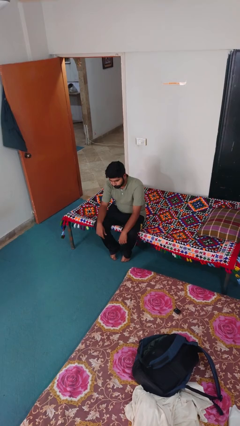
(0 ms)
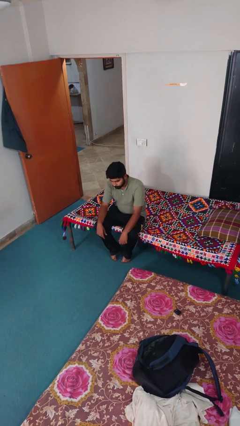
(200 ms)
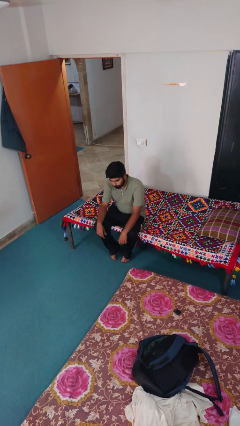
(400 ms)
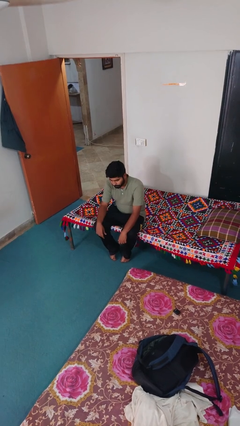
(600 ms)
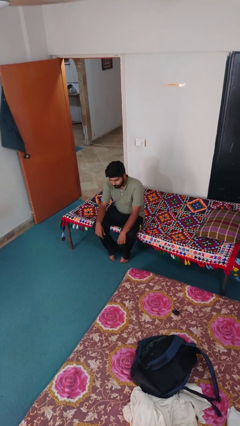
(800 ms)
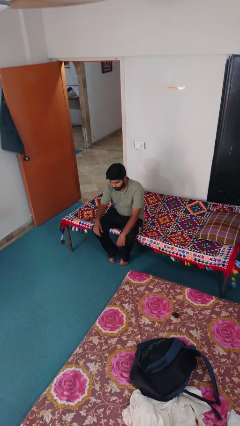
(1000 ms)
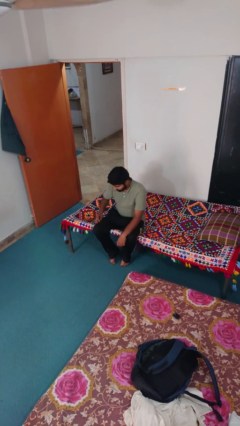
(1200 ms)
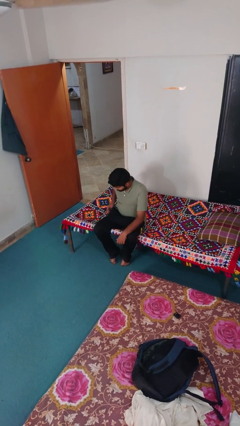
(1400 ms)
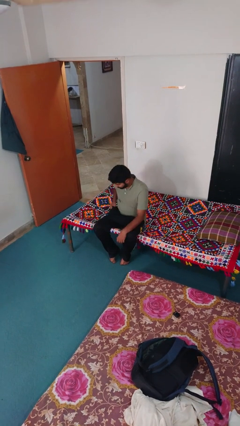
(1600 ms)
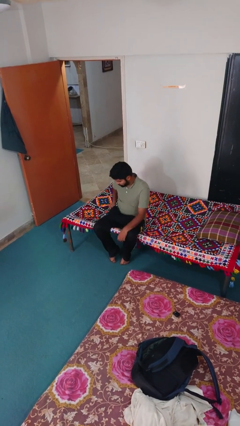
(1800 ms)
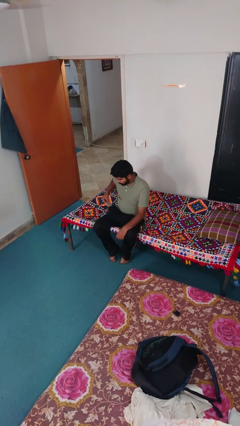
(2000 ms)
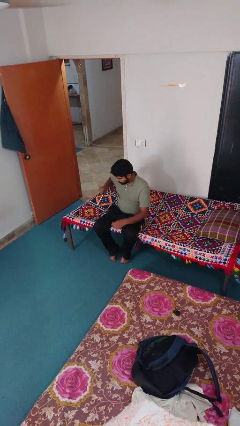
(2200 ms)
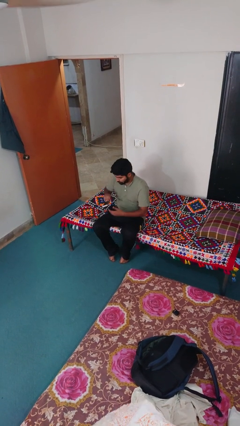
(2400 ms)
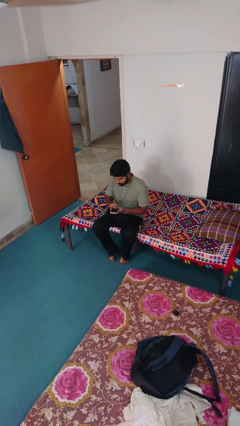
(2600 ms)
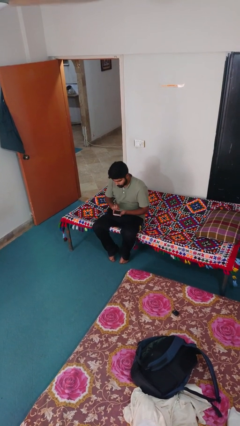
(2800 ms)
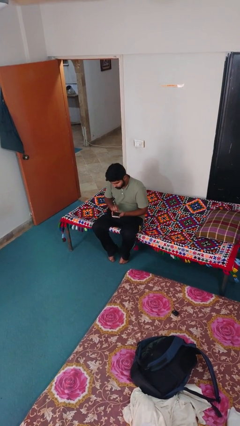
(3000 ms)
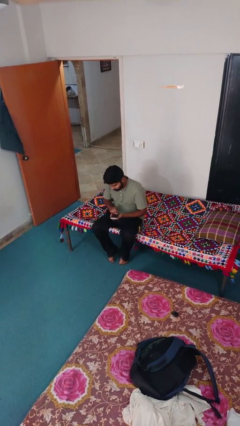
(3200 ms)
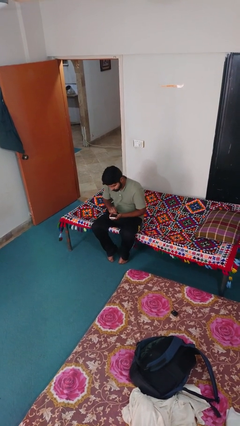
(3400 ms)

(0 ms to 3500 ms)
person takes phone from pocket

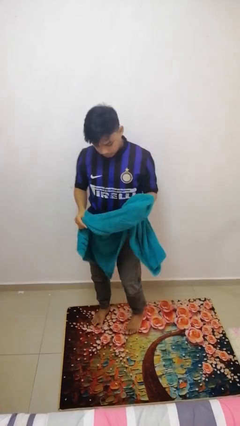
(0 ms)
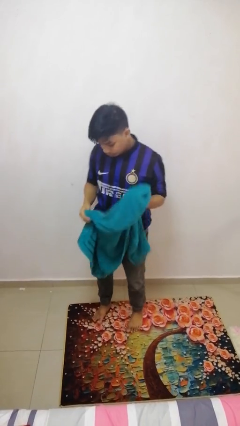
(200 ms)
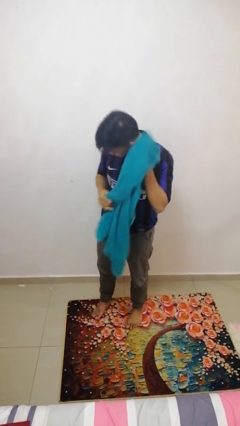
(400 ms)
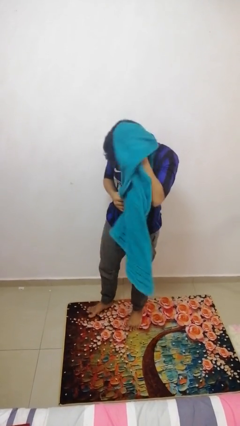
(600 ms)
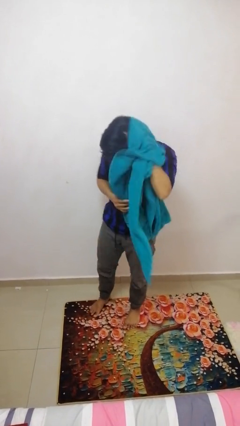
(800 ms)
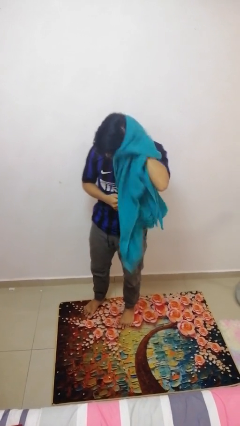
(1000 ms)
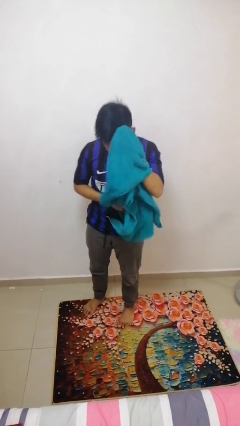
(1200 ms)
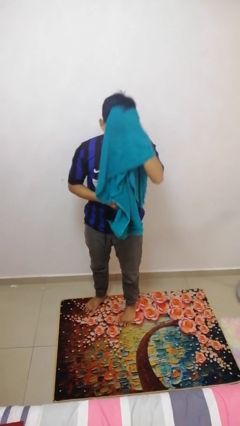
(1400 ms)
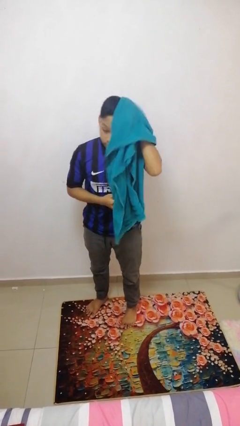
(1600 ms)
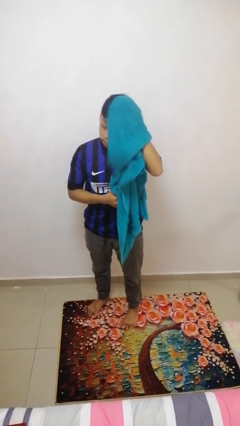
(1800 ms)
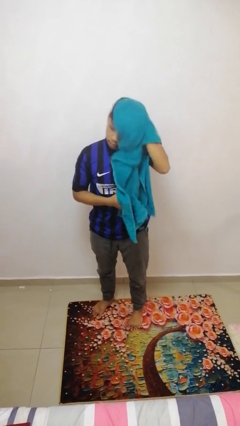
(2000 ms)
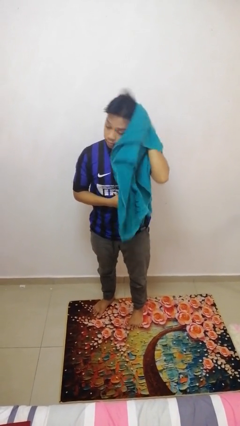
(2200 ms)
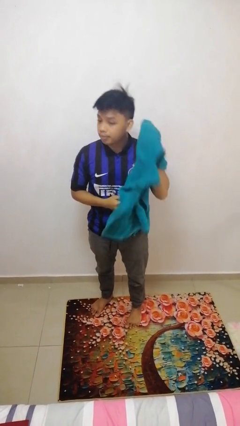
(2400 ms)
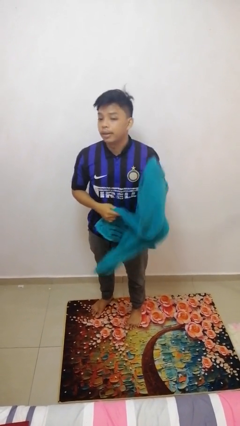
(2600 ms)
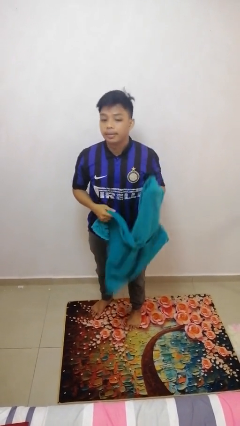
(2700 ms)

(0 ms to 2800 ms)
person dries hair with towel

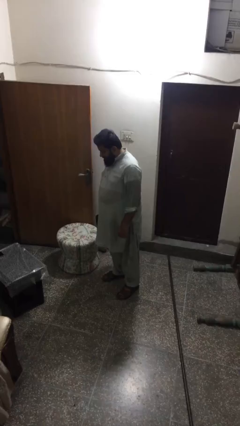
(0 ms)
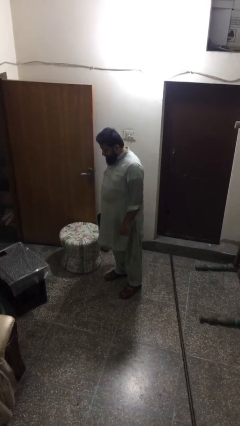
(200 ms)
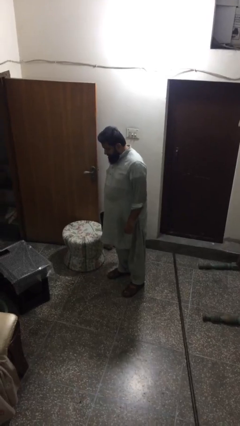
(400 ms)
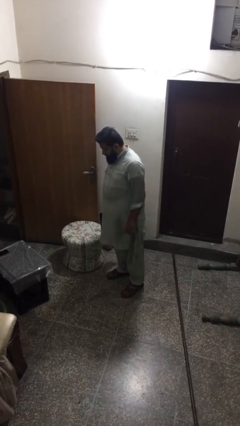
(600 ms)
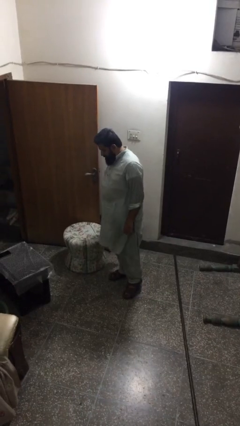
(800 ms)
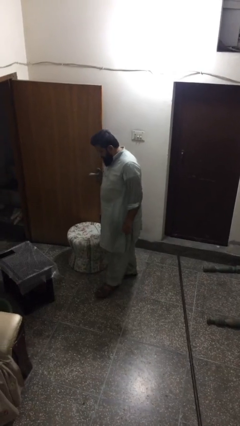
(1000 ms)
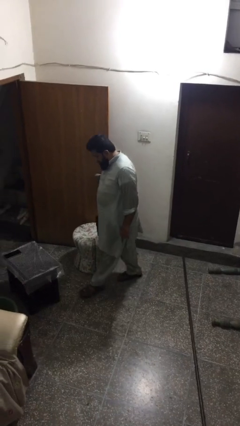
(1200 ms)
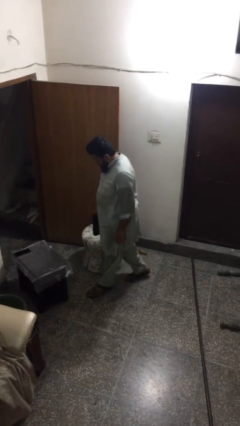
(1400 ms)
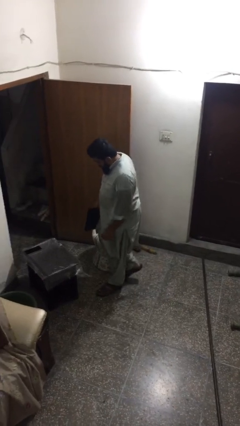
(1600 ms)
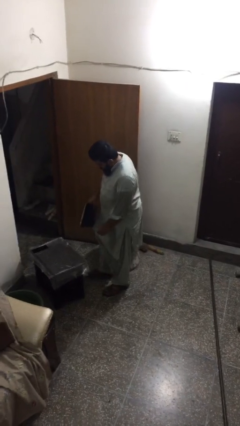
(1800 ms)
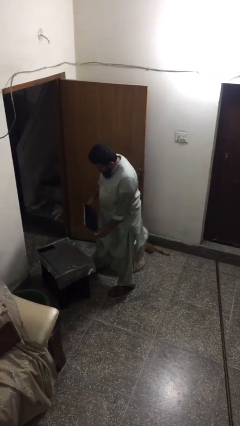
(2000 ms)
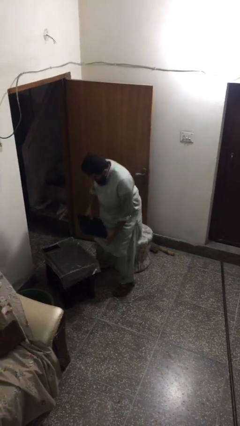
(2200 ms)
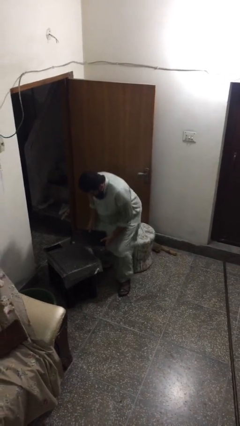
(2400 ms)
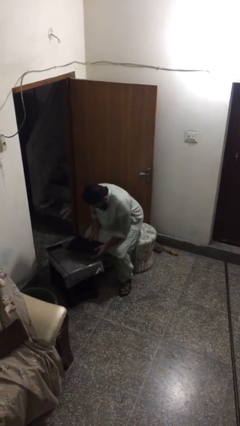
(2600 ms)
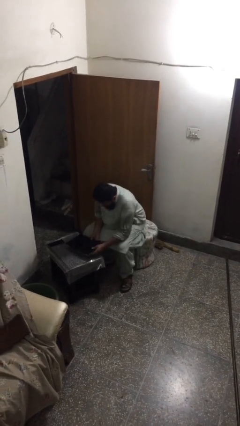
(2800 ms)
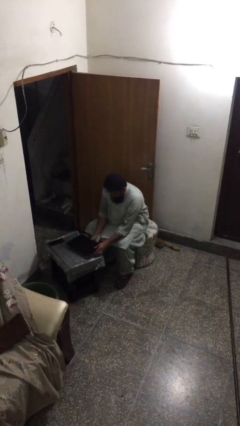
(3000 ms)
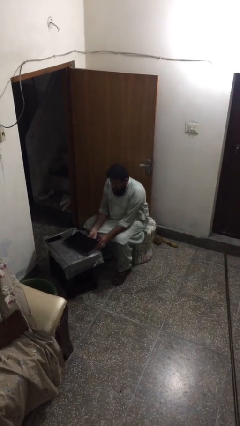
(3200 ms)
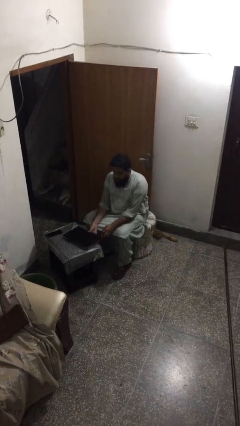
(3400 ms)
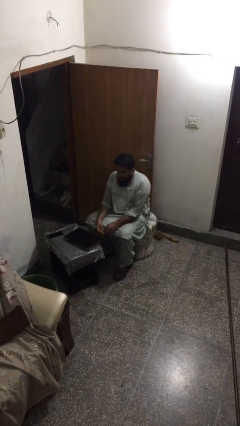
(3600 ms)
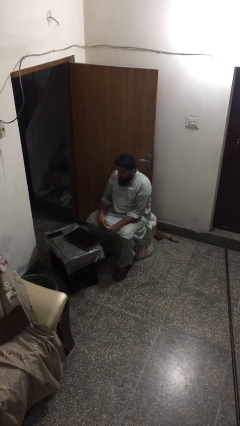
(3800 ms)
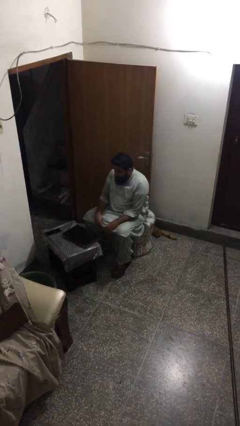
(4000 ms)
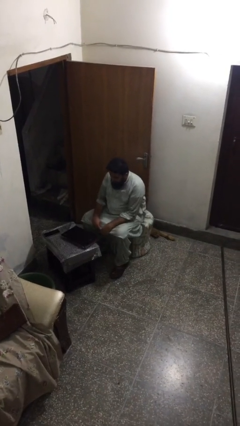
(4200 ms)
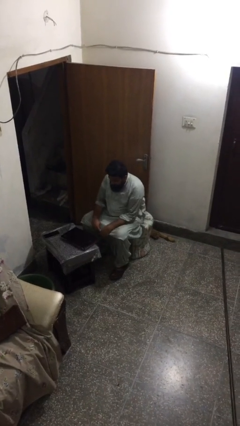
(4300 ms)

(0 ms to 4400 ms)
person sits down

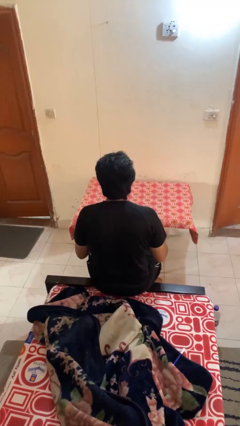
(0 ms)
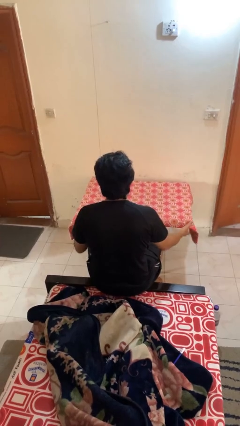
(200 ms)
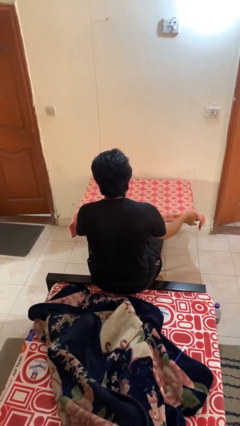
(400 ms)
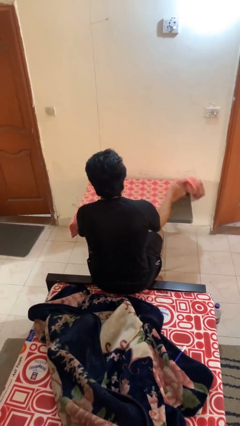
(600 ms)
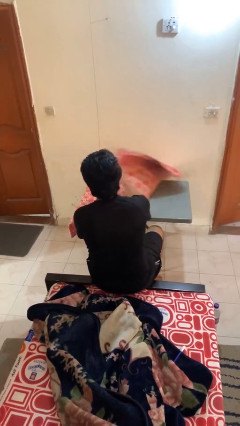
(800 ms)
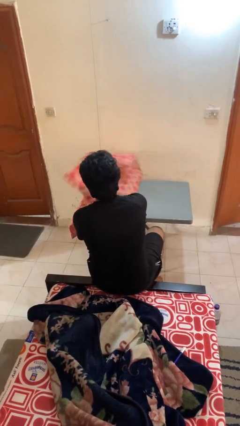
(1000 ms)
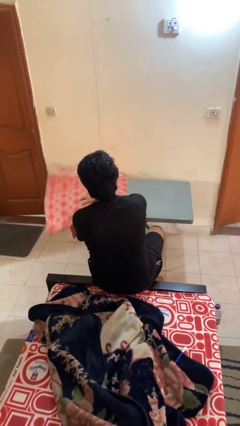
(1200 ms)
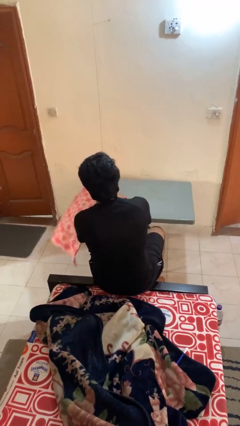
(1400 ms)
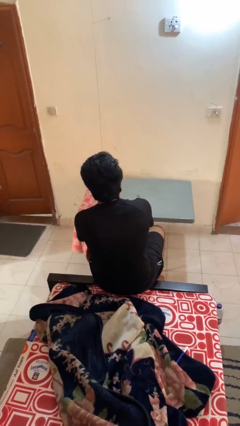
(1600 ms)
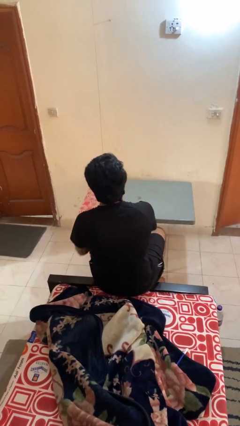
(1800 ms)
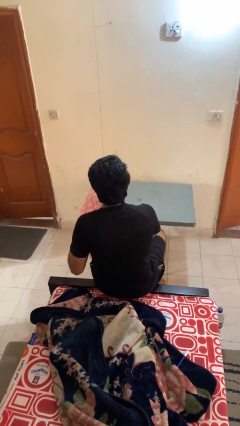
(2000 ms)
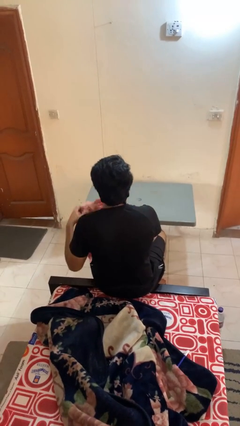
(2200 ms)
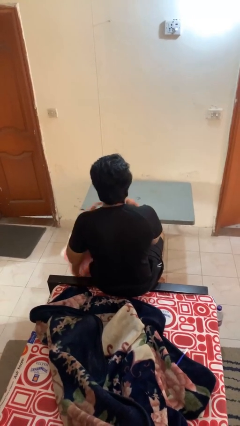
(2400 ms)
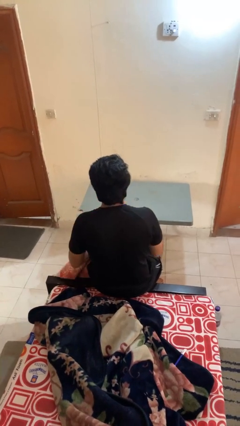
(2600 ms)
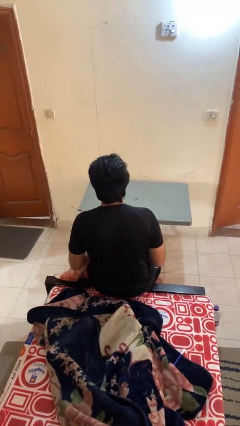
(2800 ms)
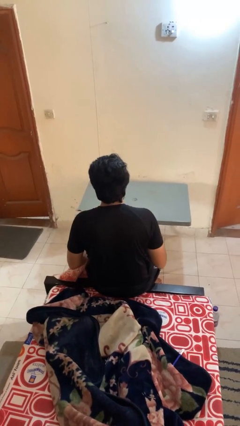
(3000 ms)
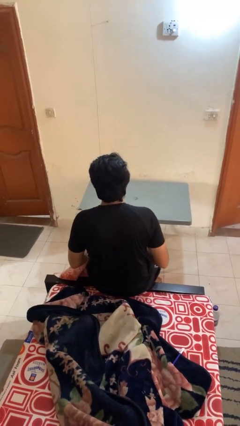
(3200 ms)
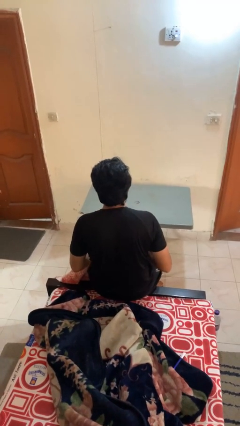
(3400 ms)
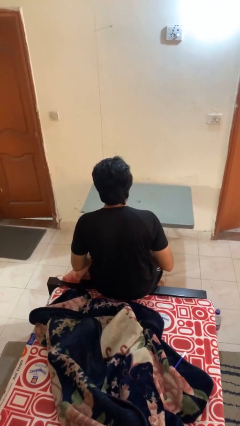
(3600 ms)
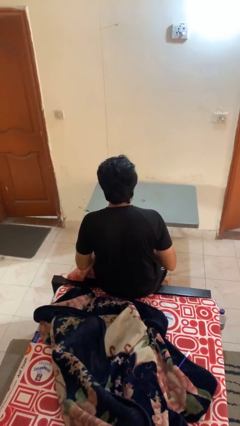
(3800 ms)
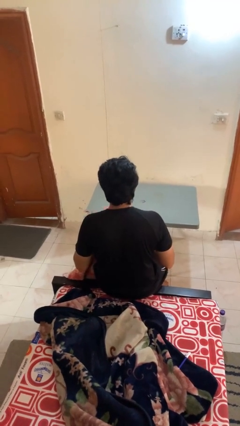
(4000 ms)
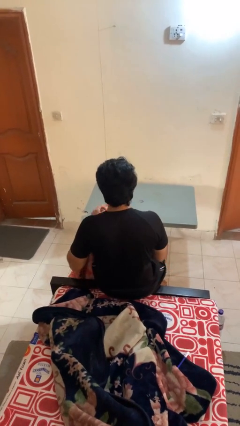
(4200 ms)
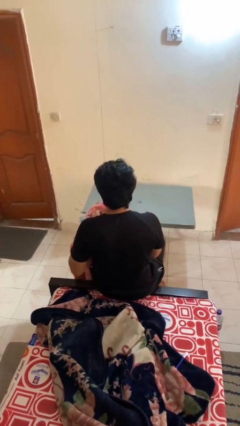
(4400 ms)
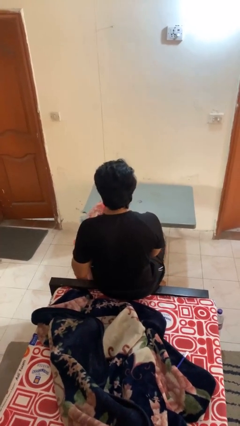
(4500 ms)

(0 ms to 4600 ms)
person folds tablecloth

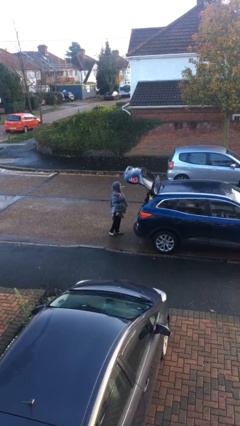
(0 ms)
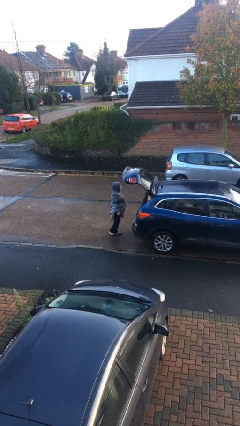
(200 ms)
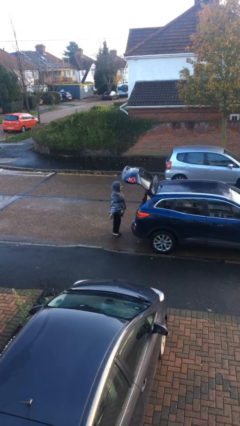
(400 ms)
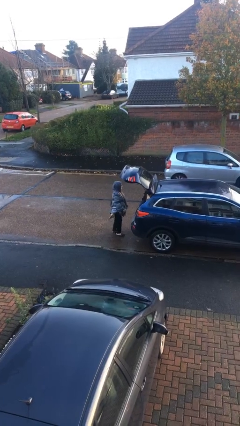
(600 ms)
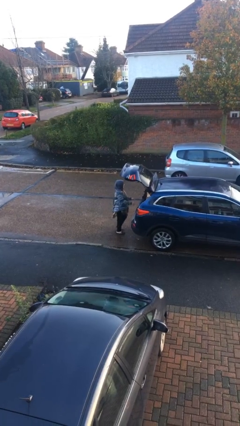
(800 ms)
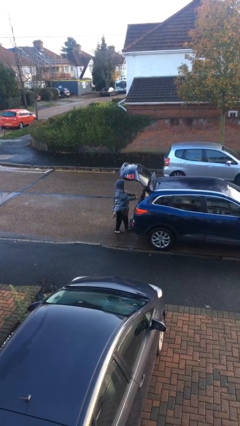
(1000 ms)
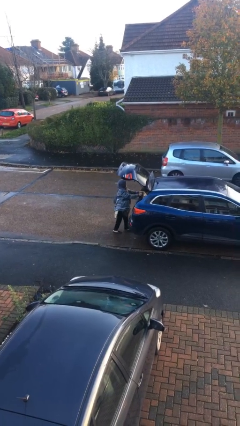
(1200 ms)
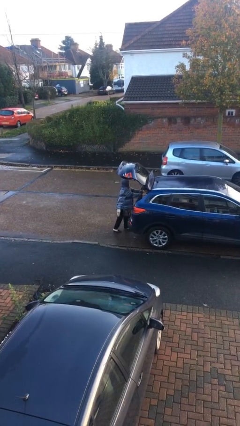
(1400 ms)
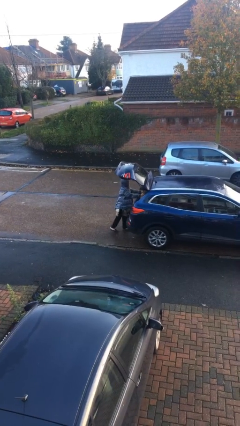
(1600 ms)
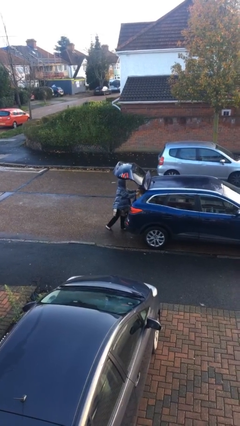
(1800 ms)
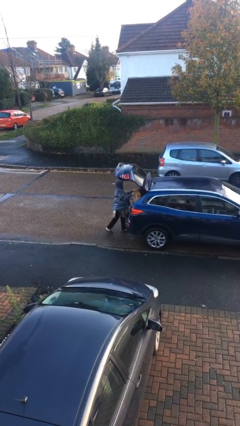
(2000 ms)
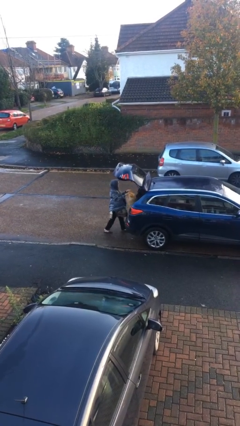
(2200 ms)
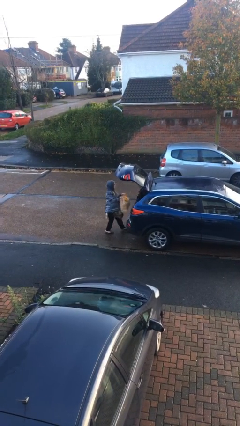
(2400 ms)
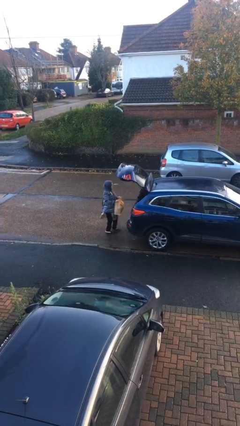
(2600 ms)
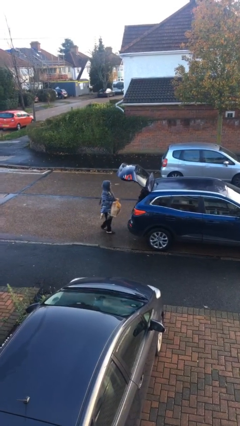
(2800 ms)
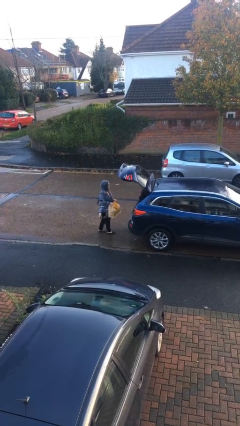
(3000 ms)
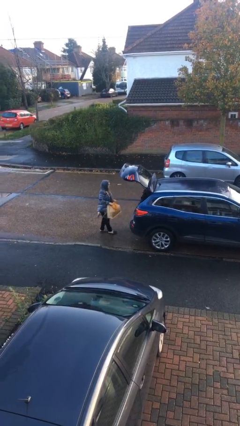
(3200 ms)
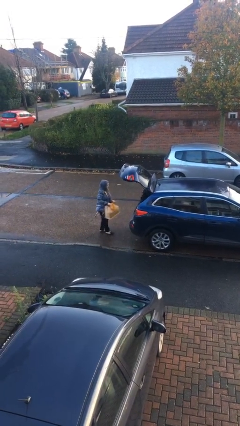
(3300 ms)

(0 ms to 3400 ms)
person unloads car
